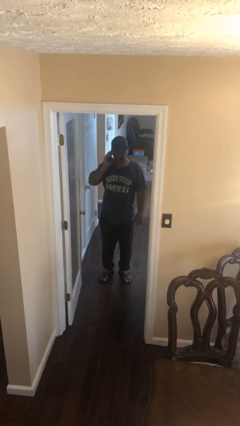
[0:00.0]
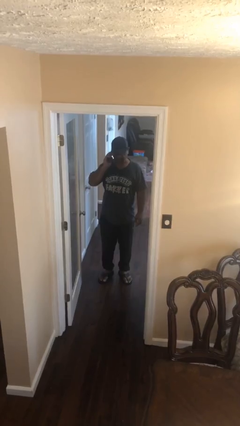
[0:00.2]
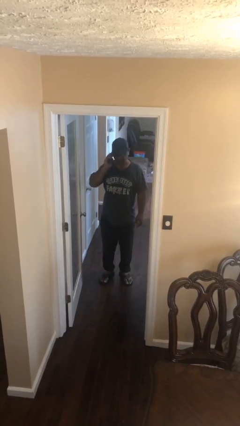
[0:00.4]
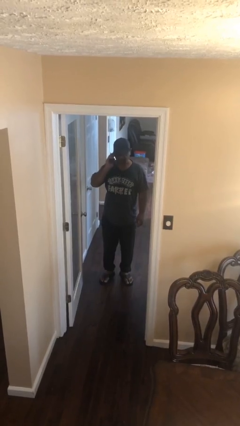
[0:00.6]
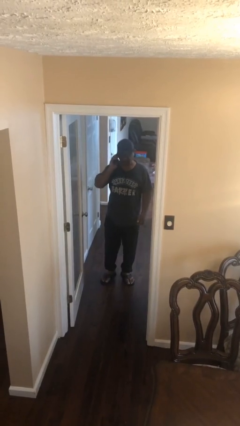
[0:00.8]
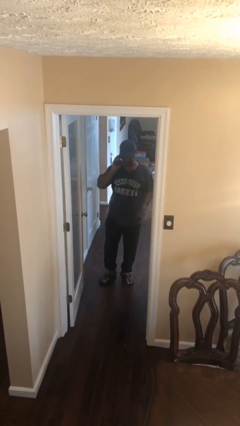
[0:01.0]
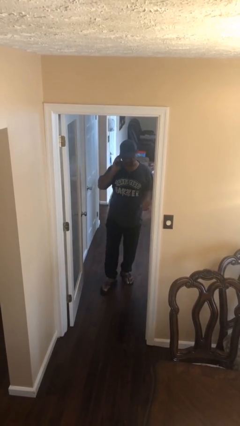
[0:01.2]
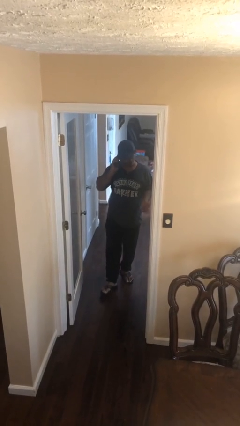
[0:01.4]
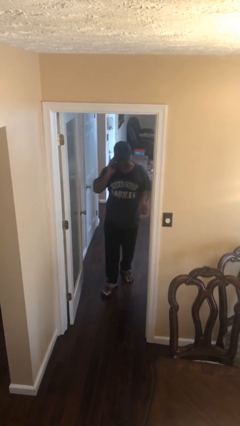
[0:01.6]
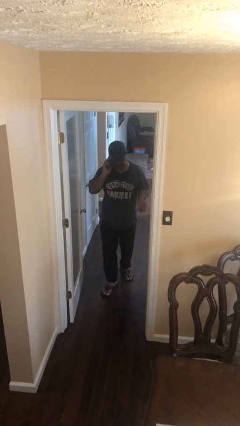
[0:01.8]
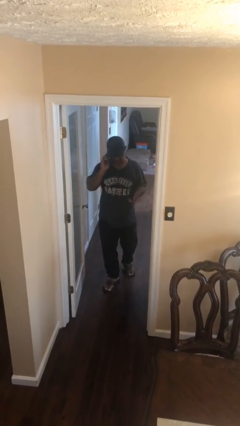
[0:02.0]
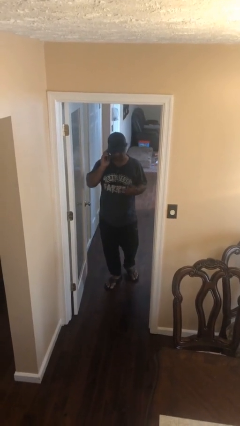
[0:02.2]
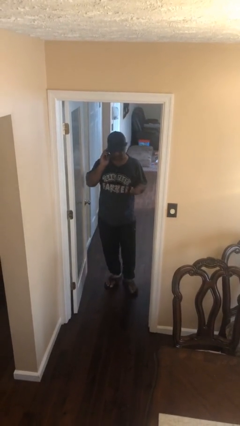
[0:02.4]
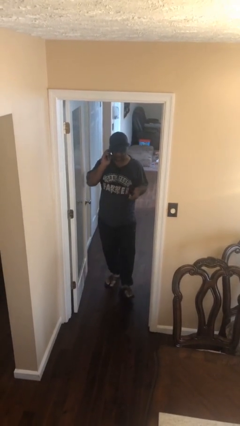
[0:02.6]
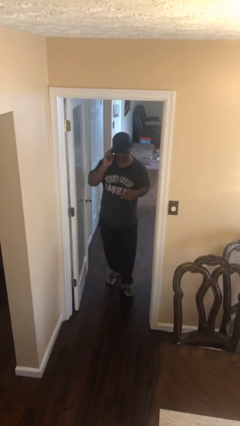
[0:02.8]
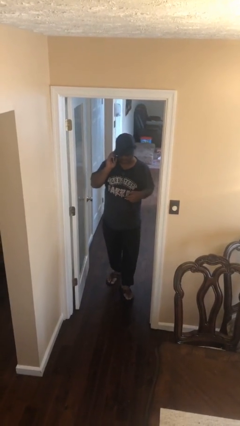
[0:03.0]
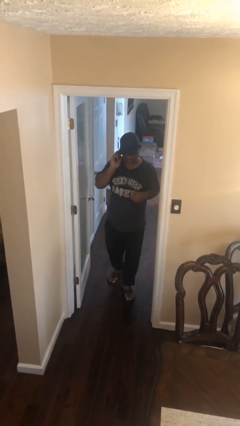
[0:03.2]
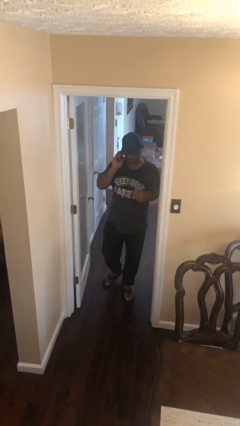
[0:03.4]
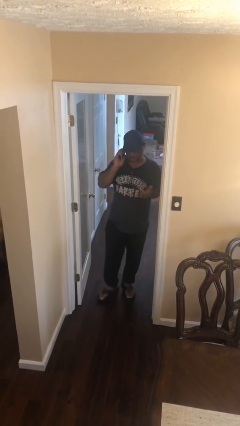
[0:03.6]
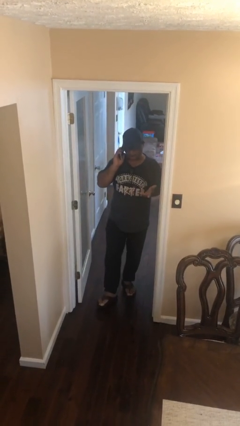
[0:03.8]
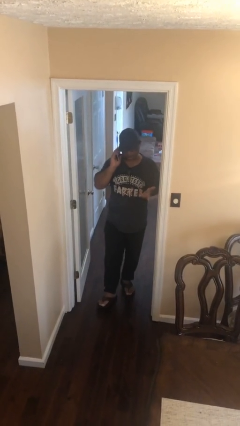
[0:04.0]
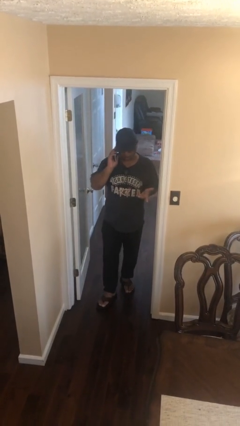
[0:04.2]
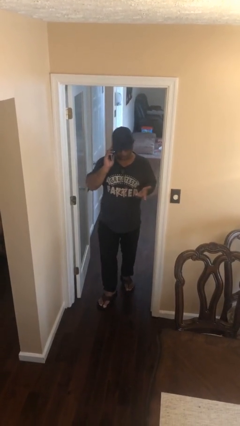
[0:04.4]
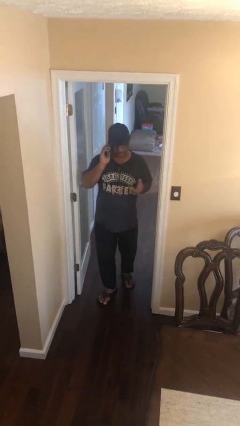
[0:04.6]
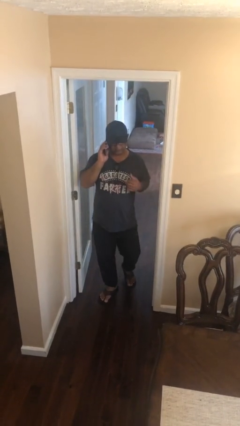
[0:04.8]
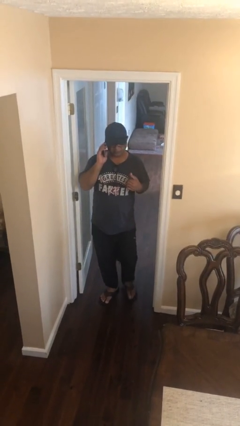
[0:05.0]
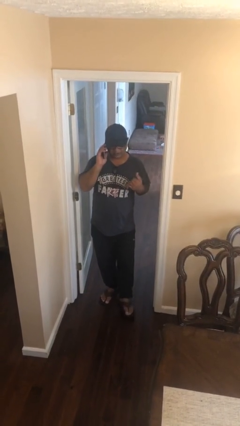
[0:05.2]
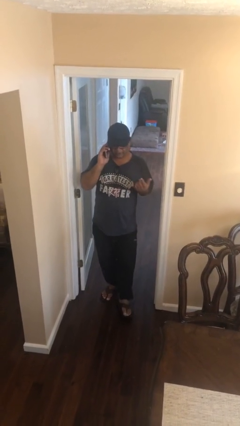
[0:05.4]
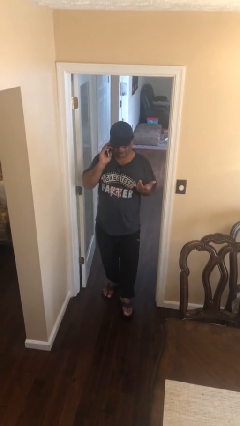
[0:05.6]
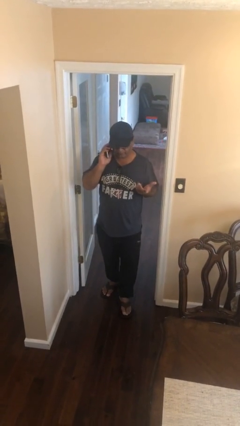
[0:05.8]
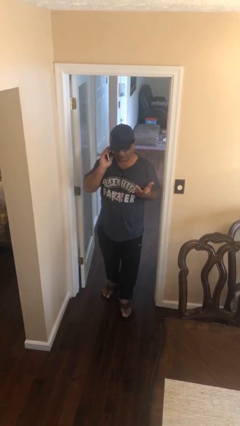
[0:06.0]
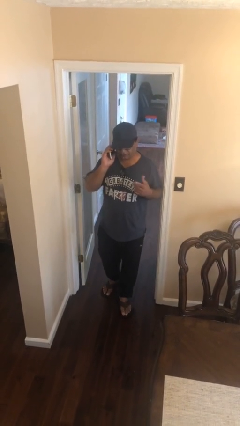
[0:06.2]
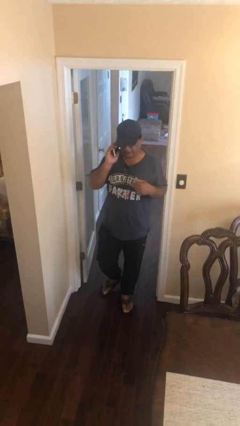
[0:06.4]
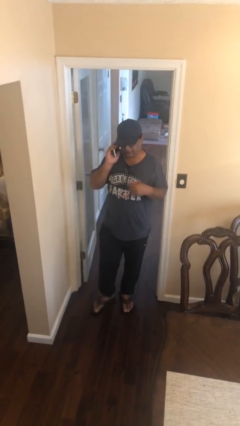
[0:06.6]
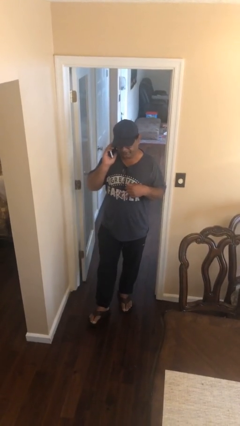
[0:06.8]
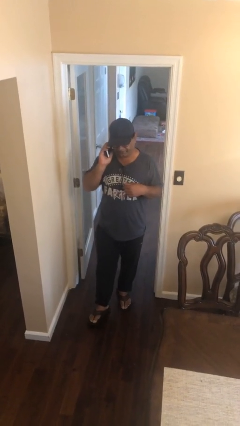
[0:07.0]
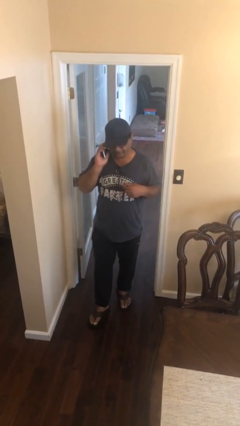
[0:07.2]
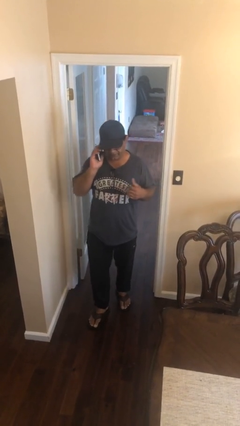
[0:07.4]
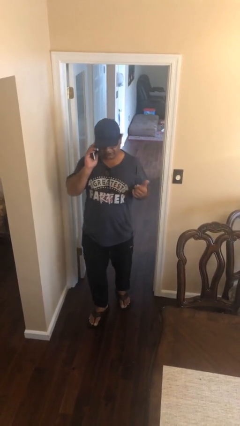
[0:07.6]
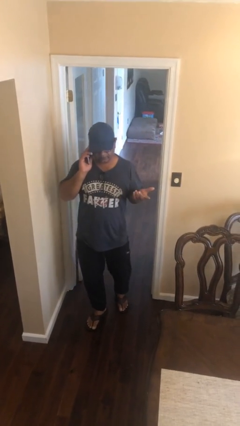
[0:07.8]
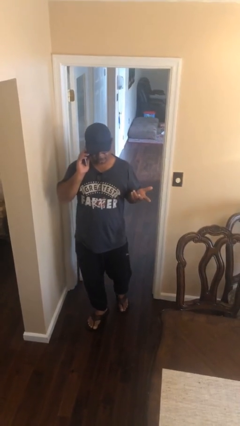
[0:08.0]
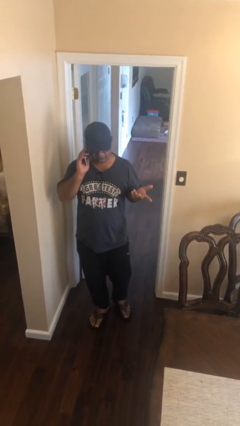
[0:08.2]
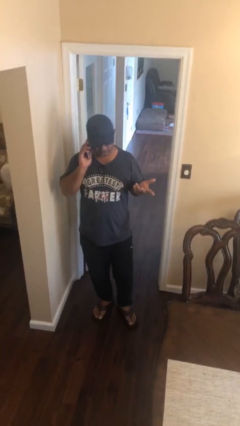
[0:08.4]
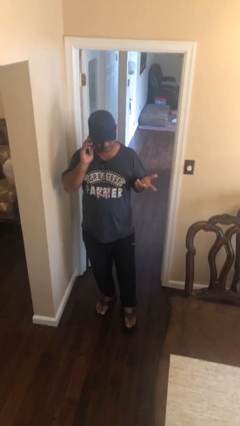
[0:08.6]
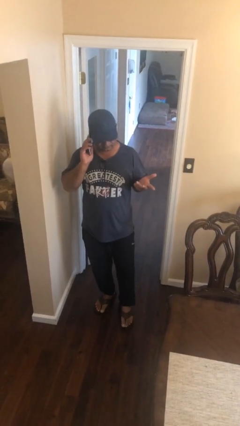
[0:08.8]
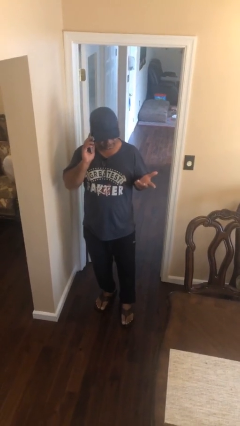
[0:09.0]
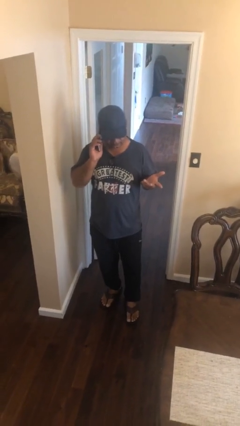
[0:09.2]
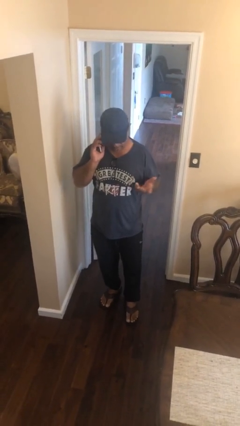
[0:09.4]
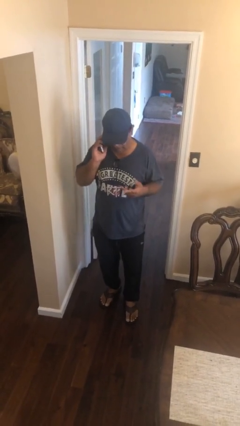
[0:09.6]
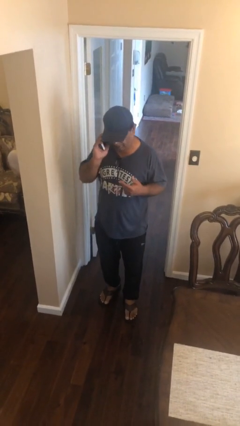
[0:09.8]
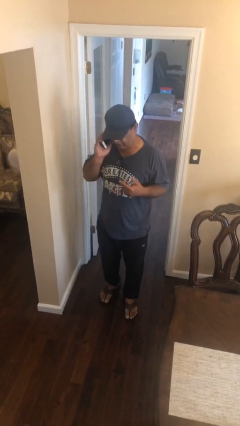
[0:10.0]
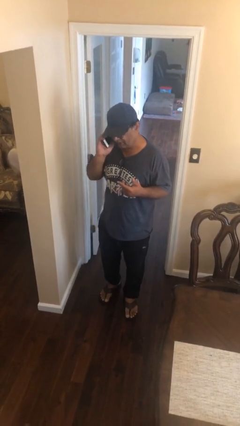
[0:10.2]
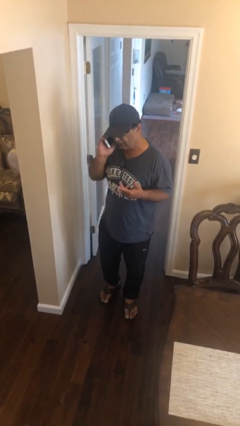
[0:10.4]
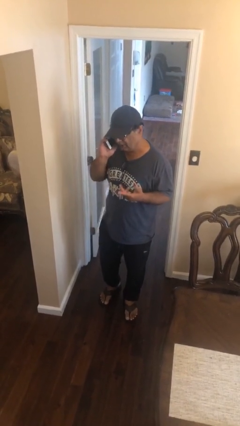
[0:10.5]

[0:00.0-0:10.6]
person enters scene through structure

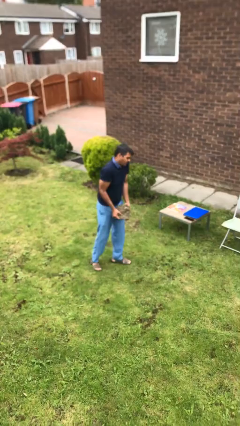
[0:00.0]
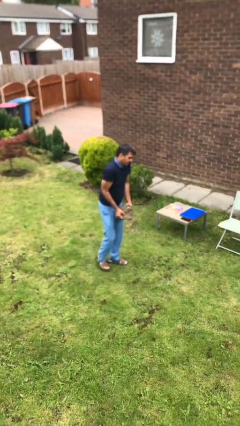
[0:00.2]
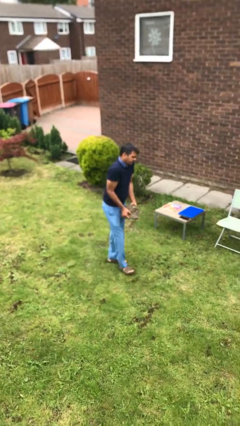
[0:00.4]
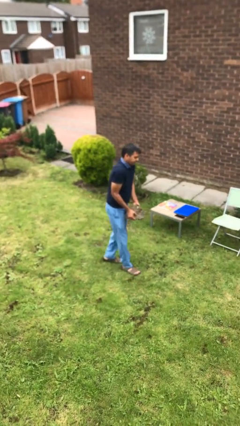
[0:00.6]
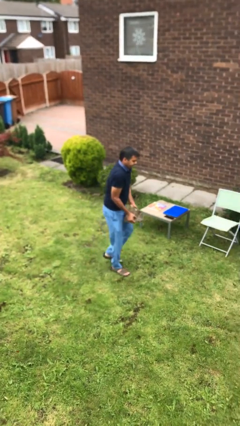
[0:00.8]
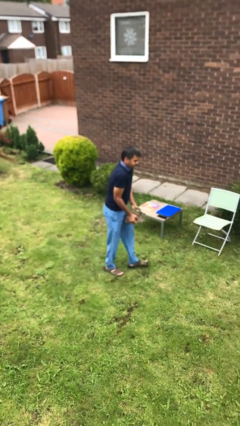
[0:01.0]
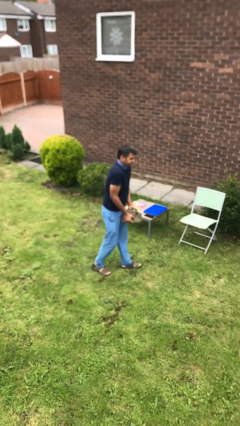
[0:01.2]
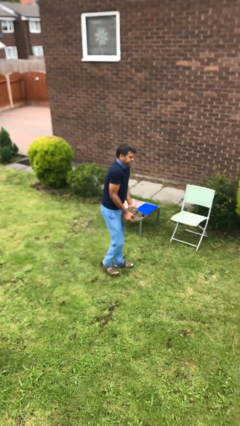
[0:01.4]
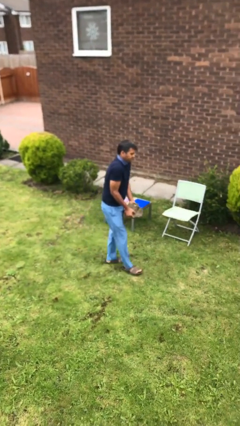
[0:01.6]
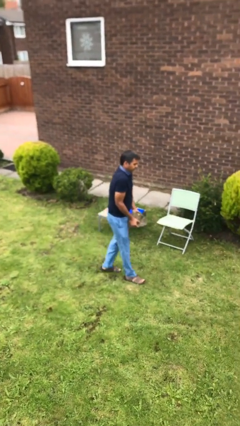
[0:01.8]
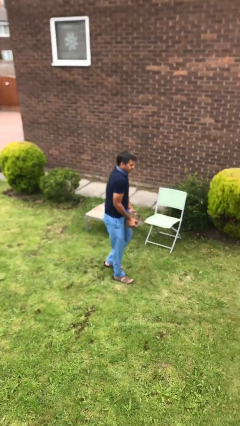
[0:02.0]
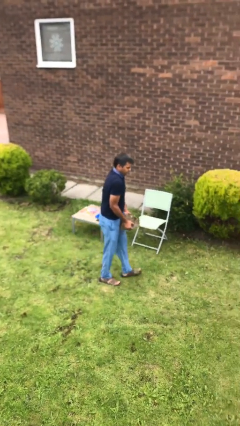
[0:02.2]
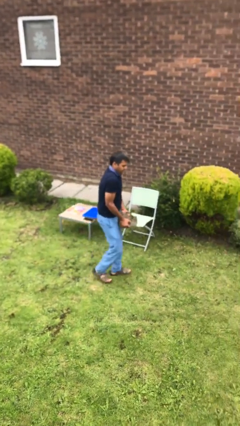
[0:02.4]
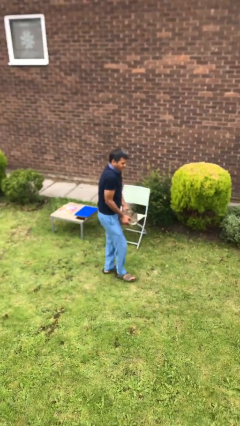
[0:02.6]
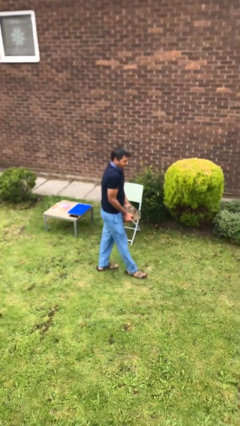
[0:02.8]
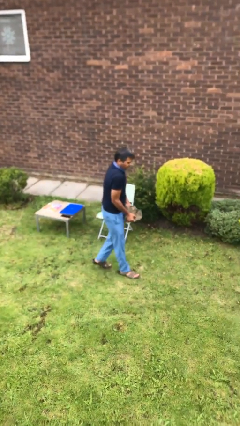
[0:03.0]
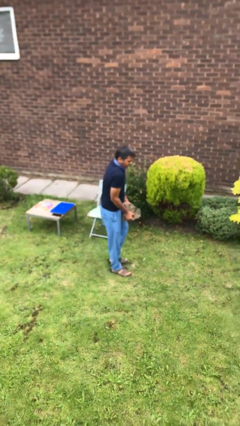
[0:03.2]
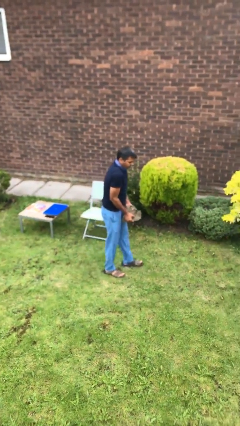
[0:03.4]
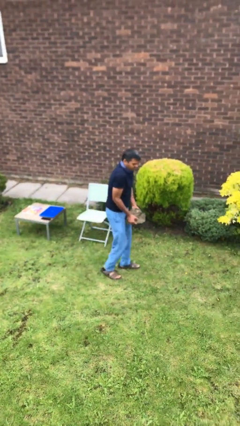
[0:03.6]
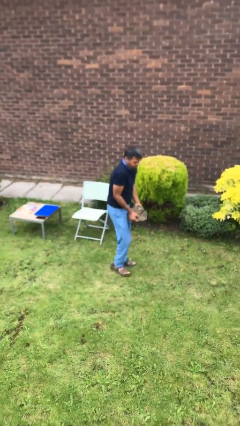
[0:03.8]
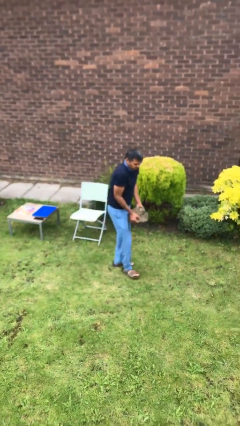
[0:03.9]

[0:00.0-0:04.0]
person carries heavy object

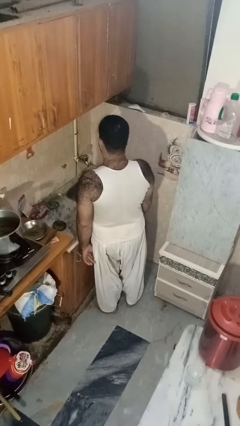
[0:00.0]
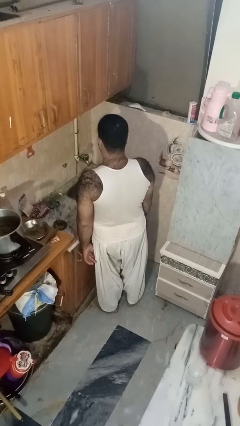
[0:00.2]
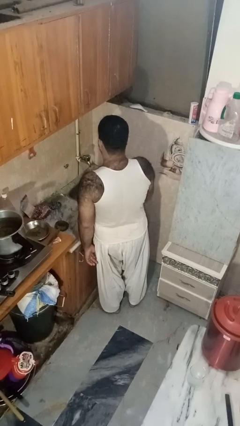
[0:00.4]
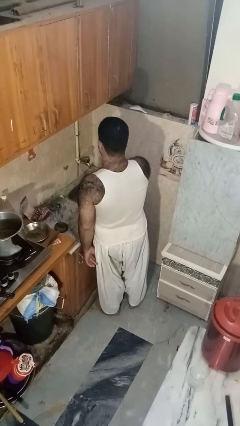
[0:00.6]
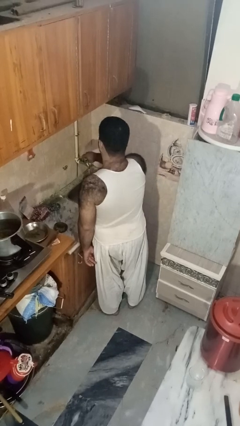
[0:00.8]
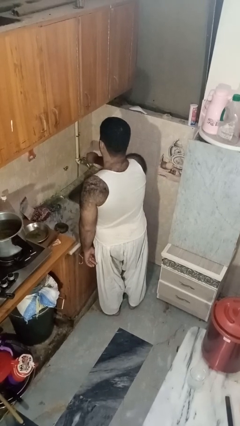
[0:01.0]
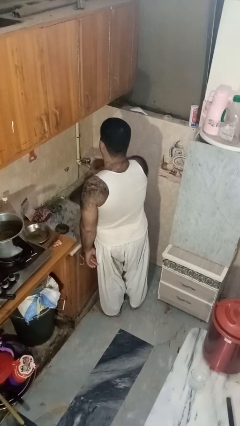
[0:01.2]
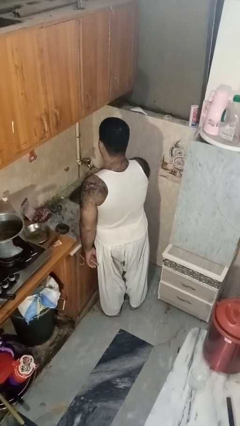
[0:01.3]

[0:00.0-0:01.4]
person turns off faucet

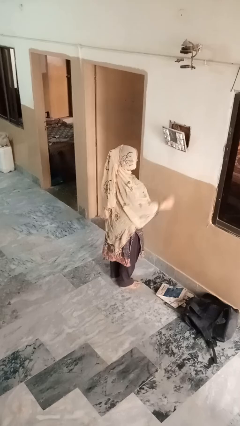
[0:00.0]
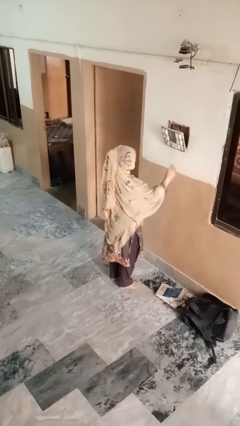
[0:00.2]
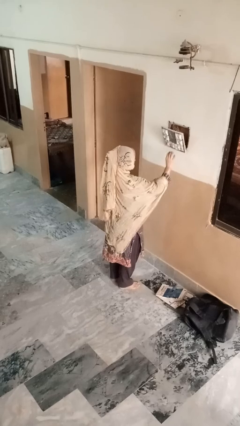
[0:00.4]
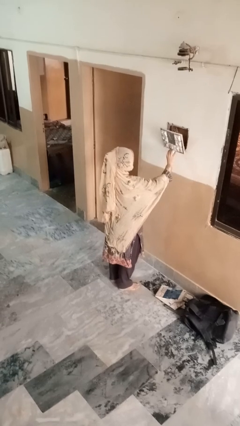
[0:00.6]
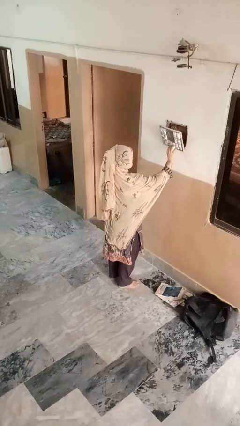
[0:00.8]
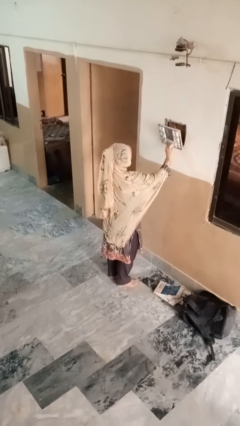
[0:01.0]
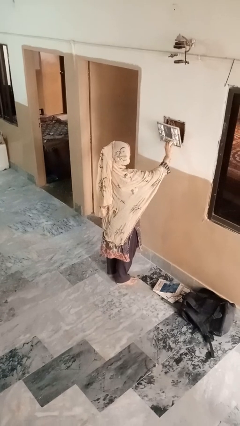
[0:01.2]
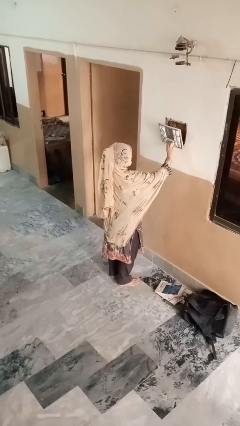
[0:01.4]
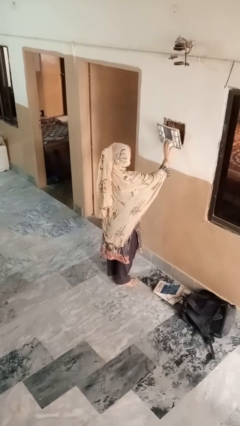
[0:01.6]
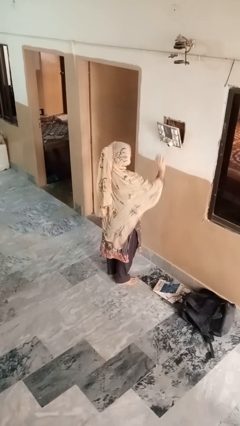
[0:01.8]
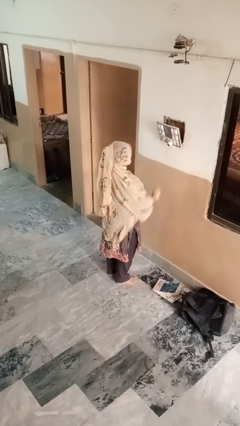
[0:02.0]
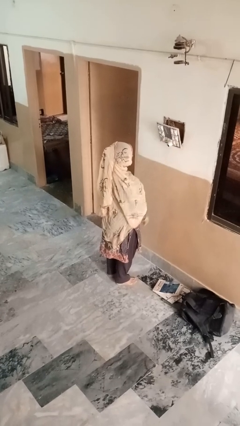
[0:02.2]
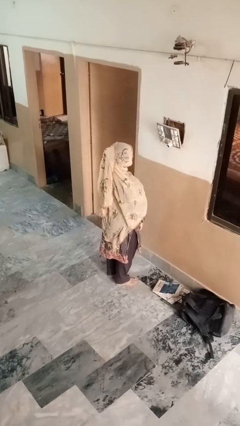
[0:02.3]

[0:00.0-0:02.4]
person plugs into electrical socket
